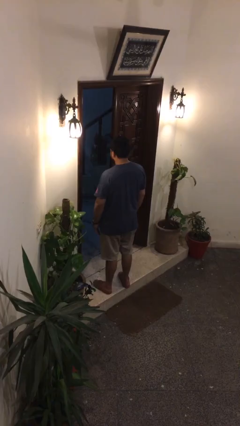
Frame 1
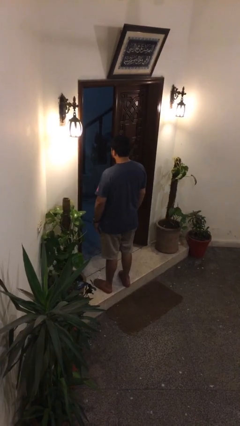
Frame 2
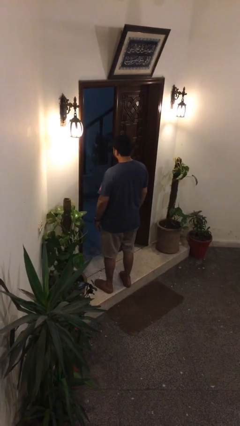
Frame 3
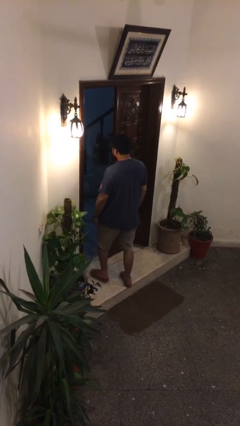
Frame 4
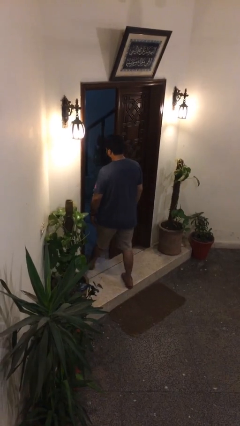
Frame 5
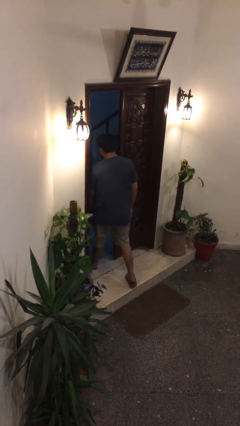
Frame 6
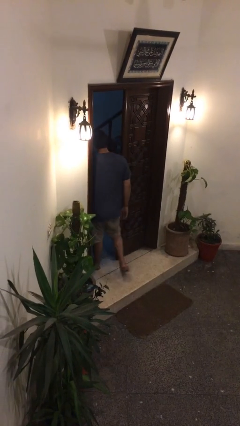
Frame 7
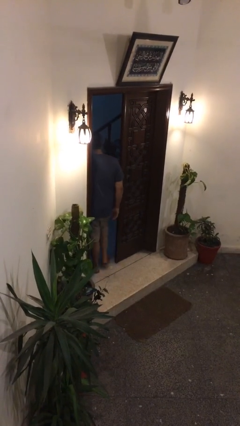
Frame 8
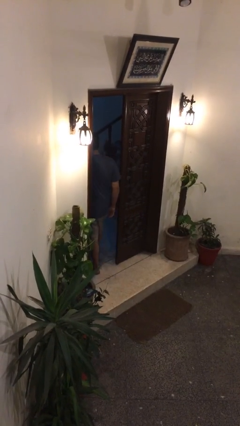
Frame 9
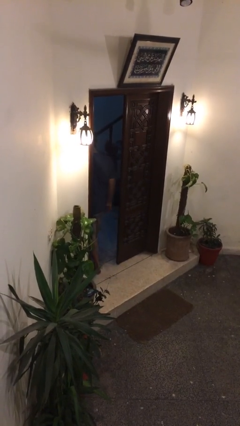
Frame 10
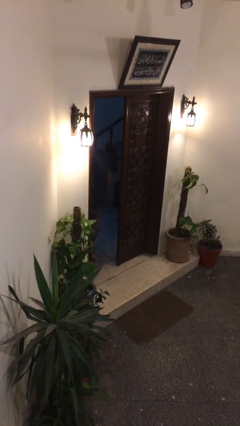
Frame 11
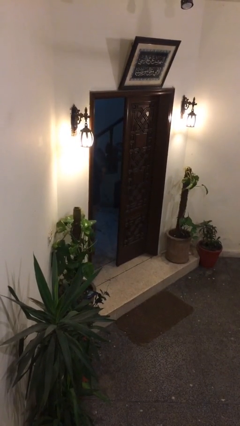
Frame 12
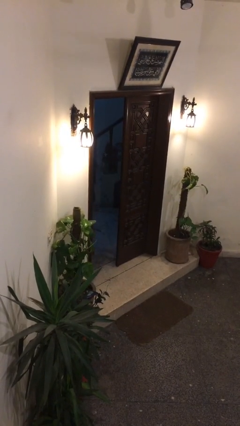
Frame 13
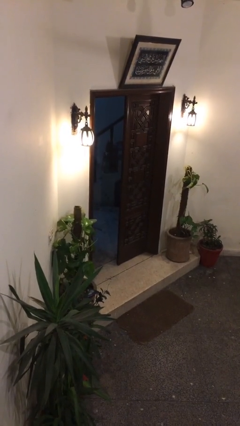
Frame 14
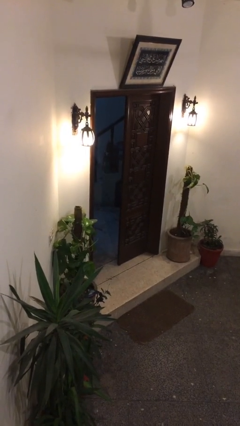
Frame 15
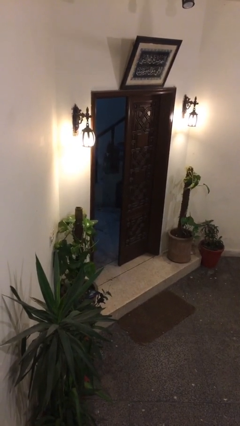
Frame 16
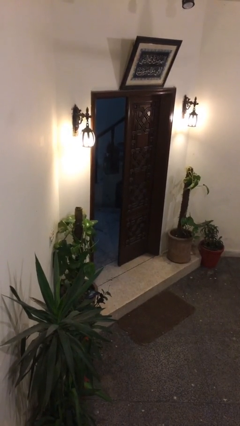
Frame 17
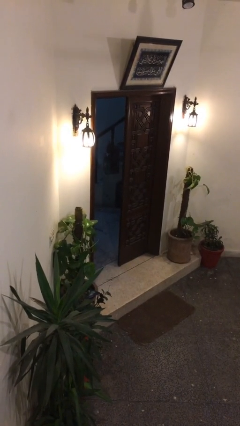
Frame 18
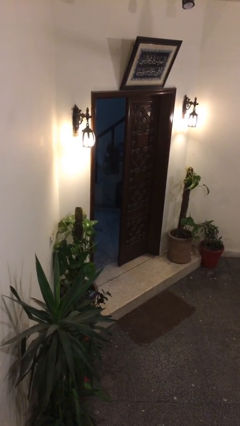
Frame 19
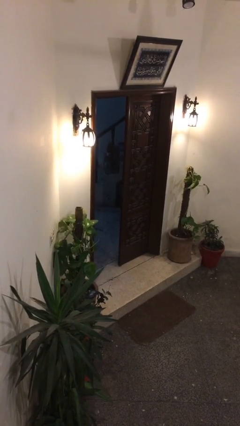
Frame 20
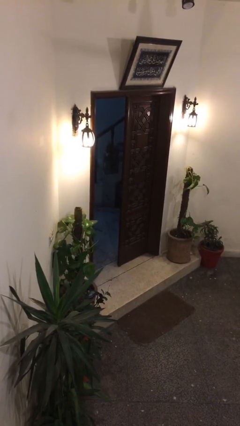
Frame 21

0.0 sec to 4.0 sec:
person exits scene through structure

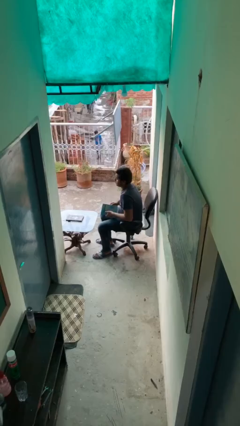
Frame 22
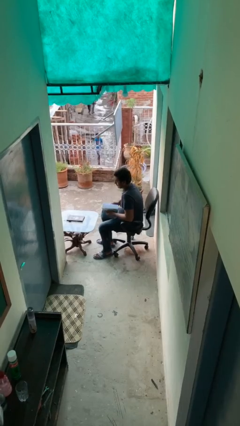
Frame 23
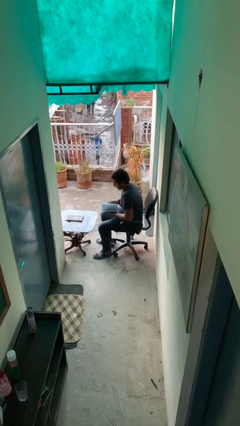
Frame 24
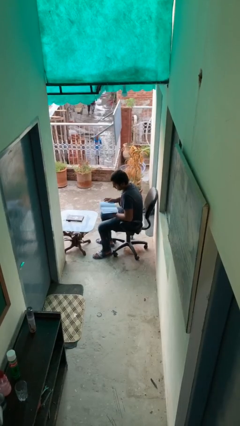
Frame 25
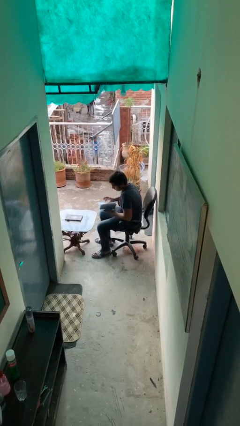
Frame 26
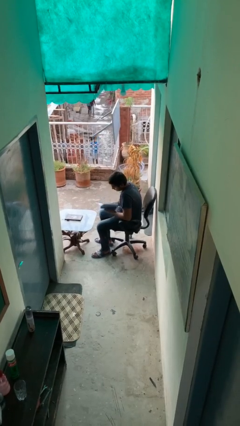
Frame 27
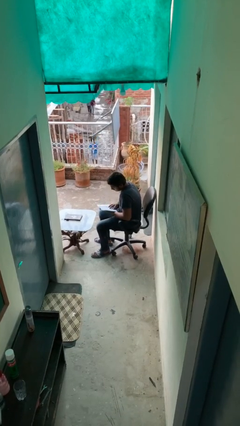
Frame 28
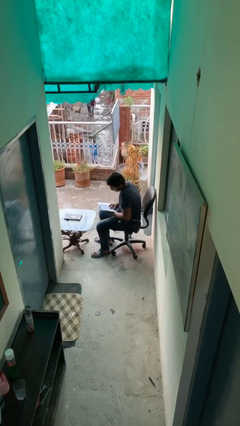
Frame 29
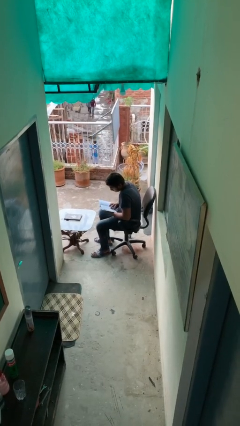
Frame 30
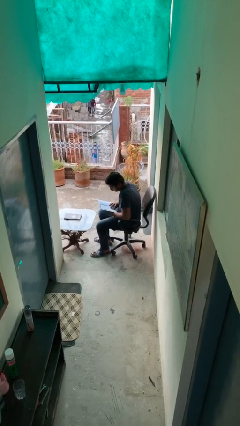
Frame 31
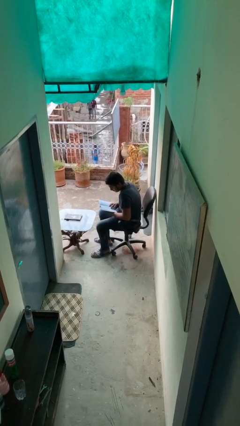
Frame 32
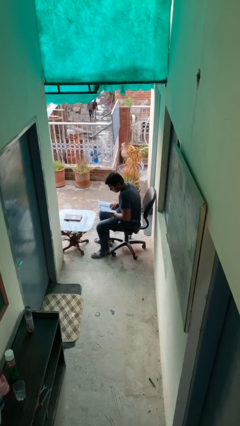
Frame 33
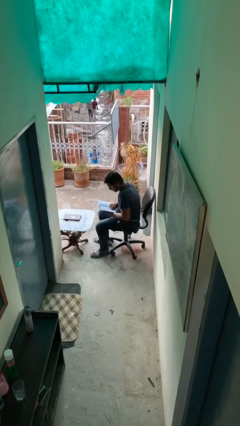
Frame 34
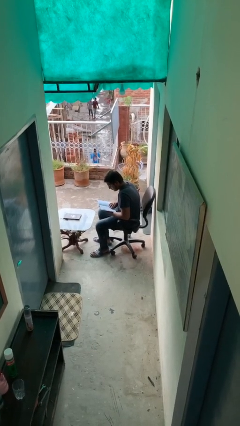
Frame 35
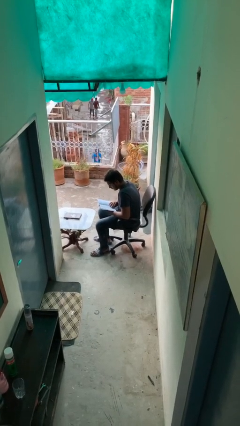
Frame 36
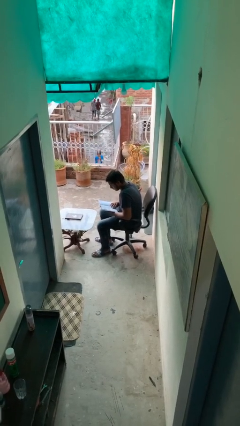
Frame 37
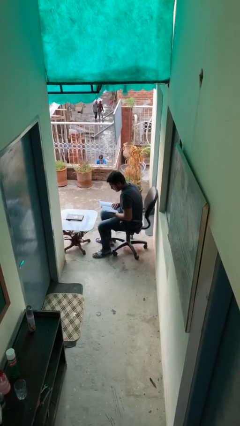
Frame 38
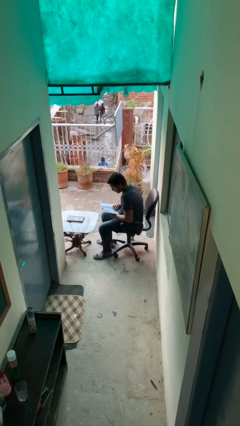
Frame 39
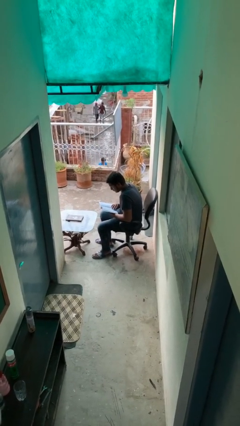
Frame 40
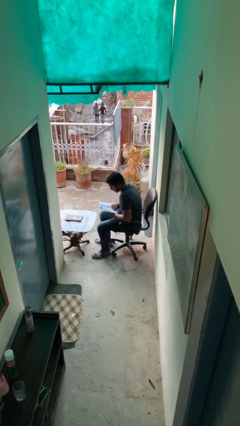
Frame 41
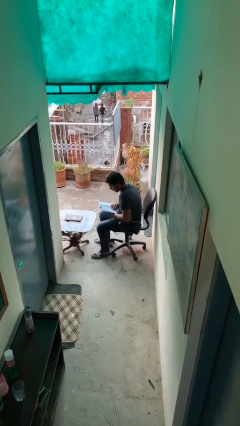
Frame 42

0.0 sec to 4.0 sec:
person reads document

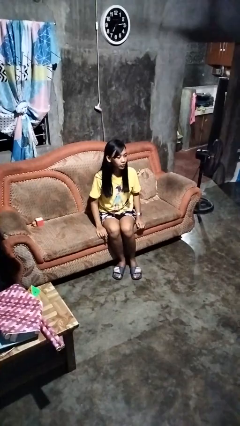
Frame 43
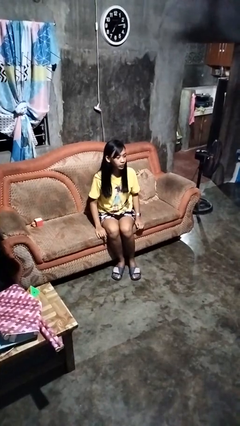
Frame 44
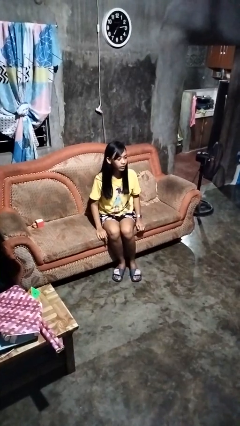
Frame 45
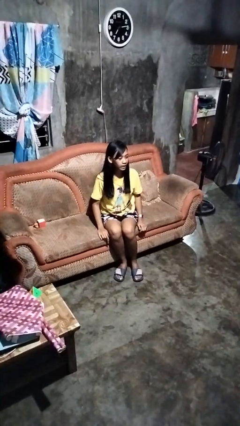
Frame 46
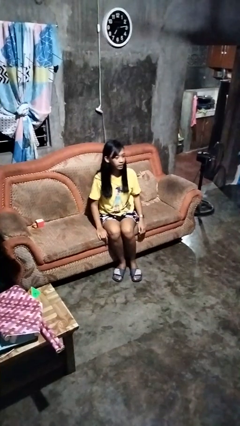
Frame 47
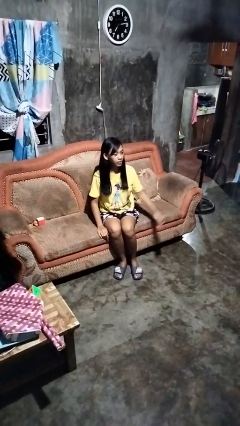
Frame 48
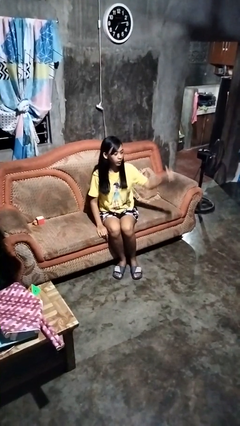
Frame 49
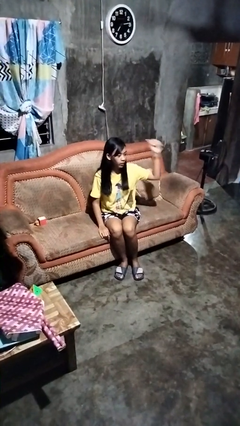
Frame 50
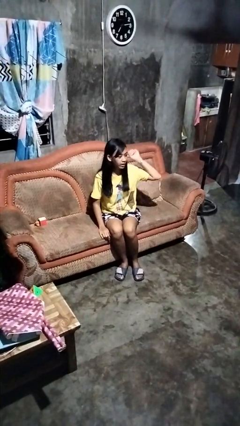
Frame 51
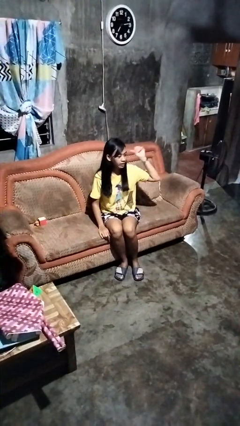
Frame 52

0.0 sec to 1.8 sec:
person gestures behind me

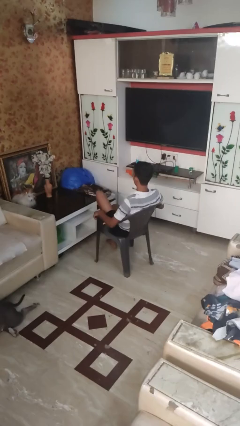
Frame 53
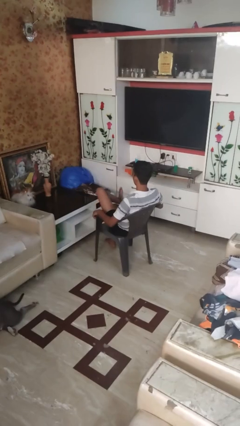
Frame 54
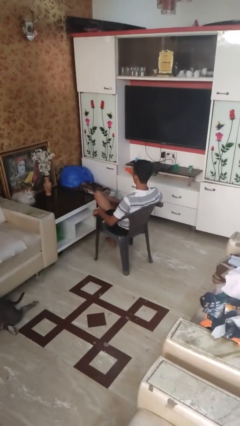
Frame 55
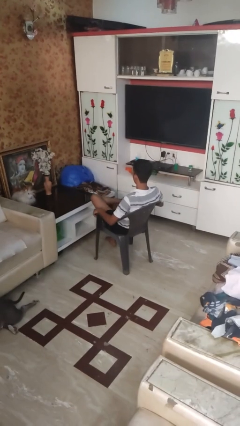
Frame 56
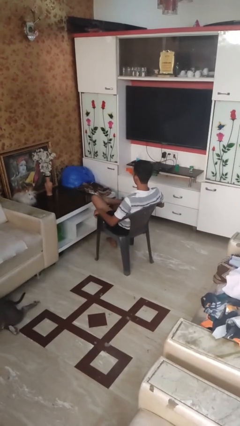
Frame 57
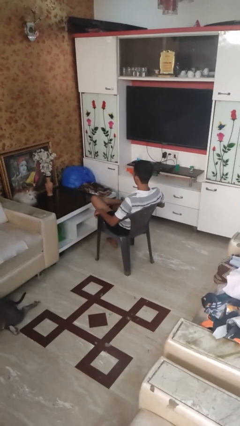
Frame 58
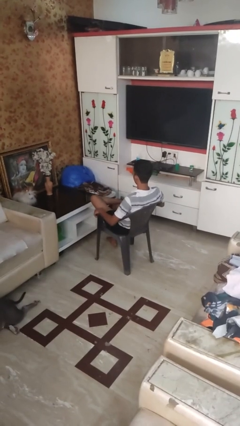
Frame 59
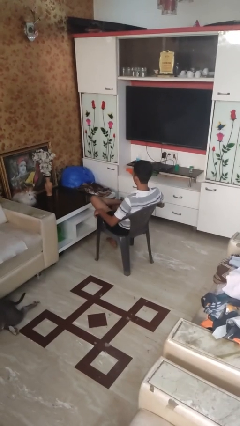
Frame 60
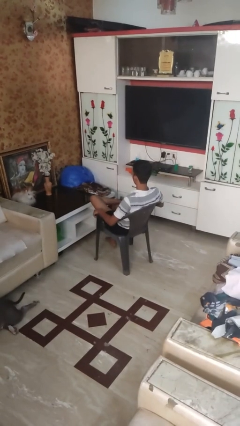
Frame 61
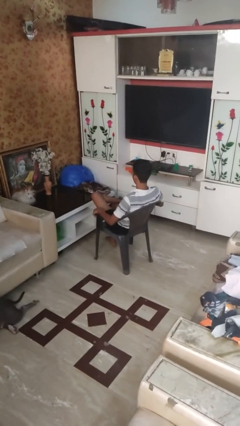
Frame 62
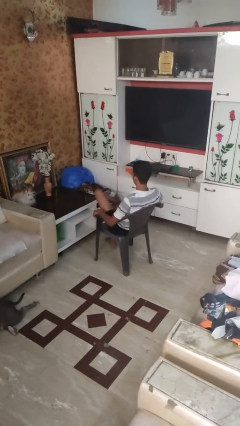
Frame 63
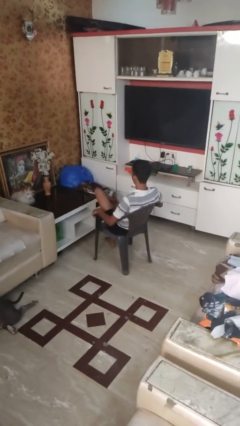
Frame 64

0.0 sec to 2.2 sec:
person crosses legs

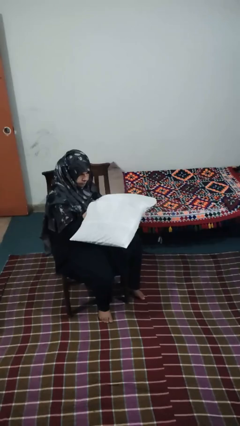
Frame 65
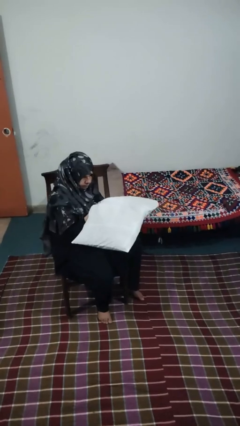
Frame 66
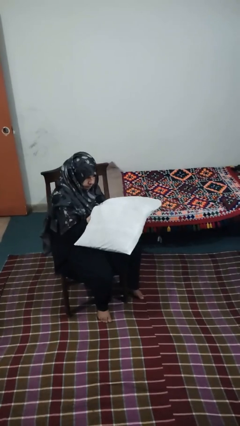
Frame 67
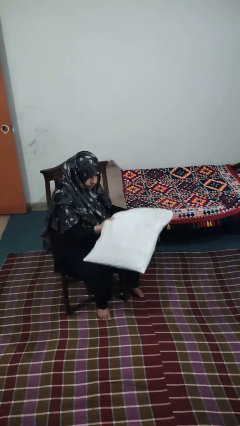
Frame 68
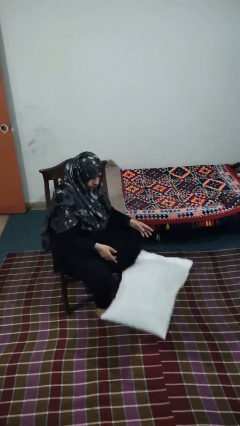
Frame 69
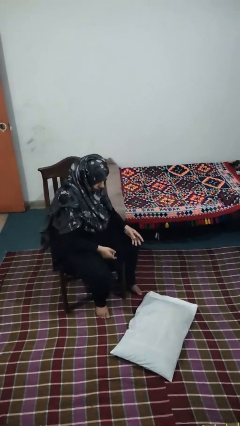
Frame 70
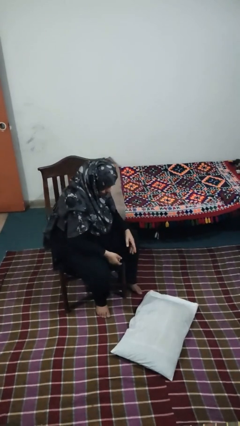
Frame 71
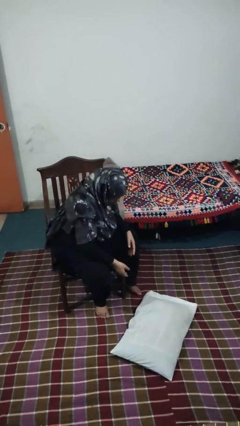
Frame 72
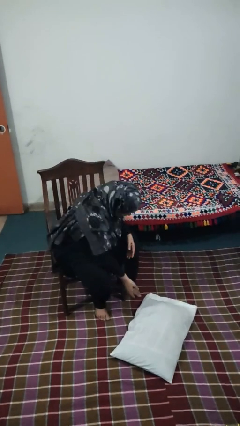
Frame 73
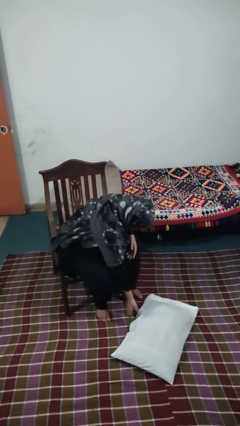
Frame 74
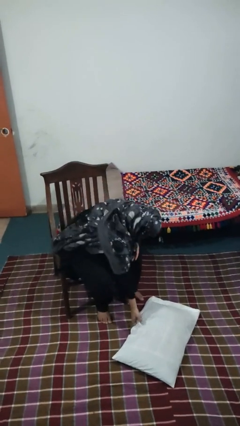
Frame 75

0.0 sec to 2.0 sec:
person drops object

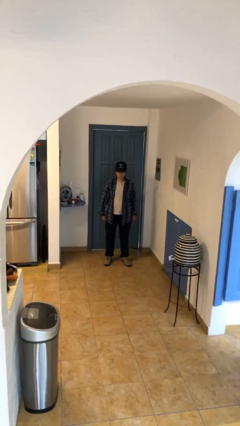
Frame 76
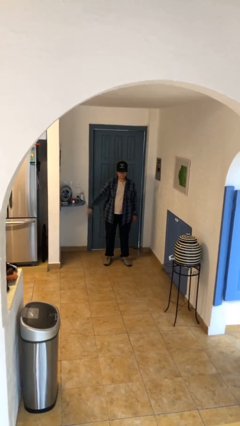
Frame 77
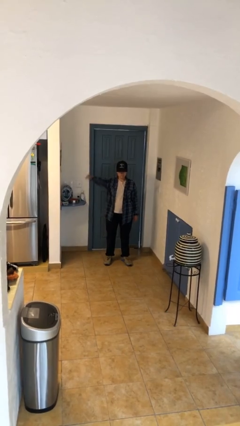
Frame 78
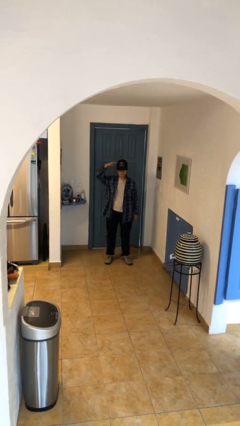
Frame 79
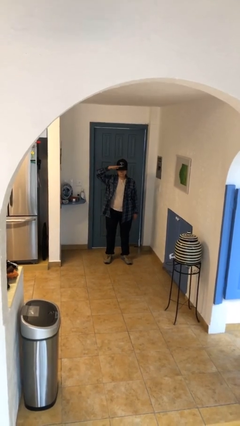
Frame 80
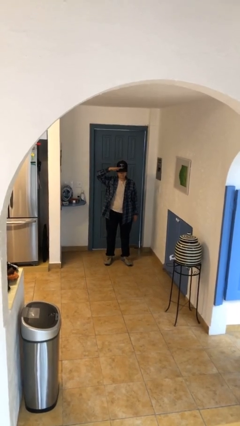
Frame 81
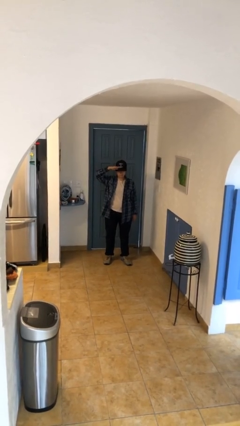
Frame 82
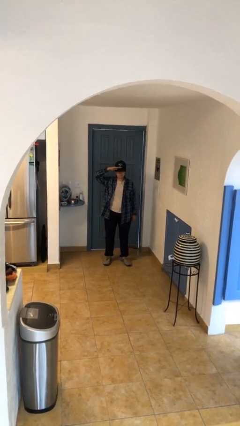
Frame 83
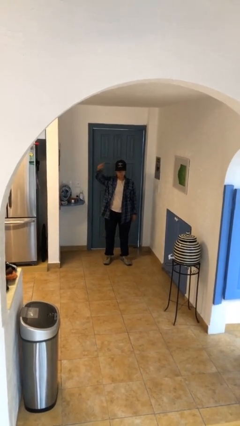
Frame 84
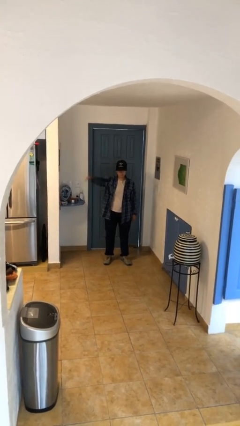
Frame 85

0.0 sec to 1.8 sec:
person salutes

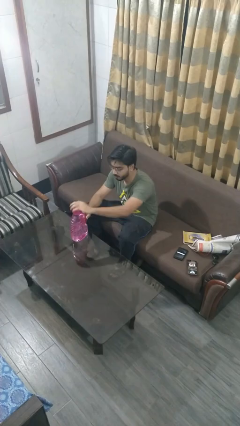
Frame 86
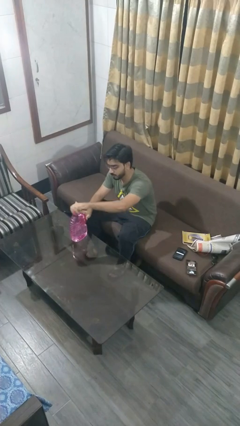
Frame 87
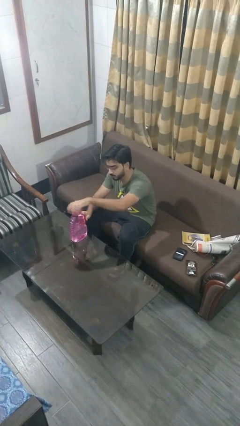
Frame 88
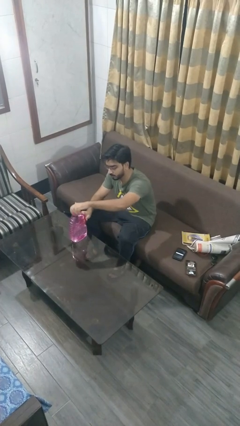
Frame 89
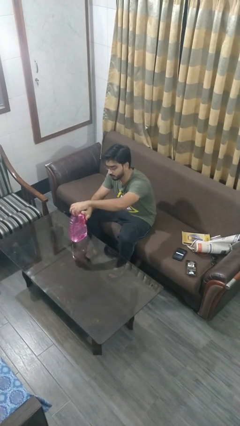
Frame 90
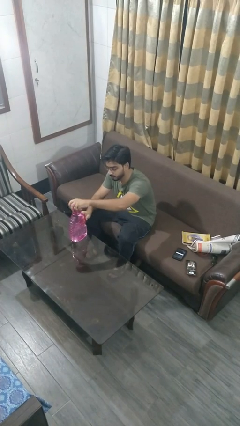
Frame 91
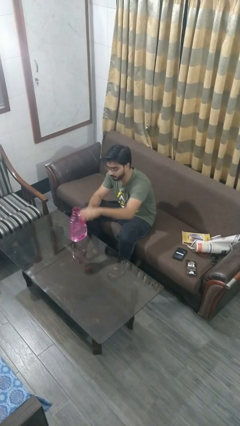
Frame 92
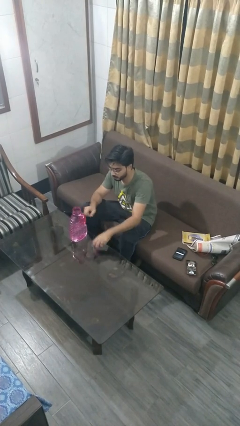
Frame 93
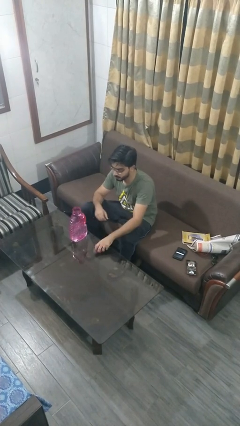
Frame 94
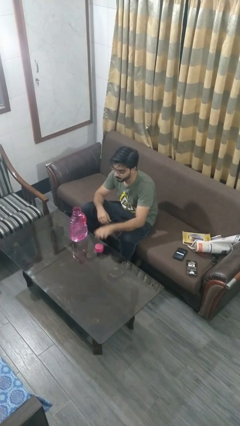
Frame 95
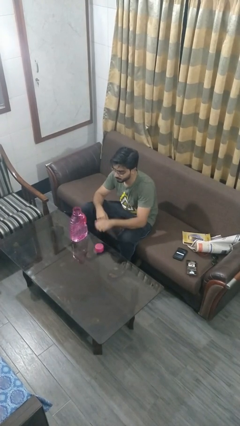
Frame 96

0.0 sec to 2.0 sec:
person unscrews lid from bottle
